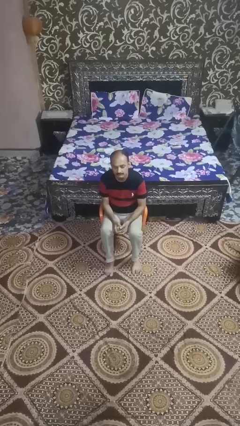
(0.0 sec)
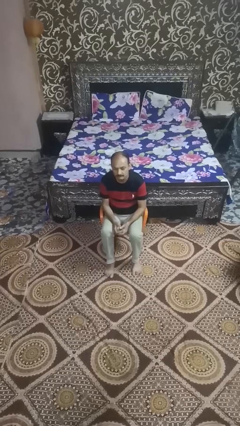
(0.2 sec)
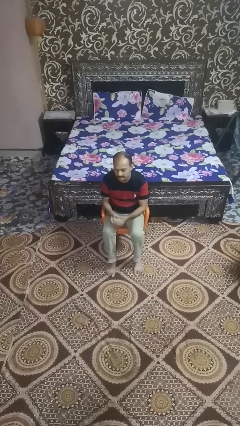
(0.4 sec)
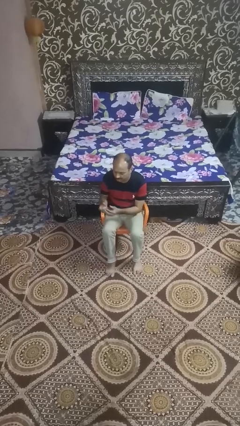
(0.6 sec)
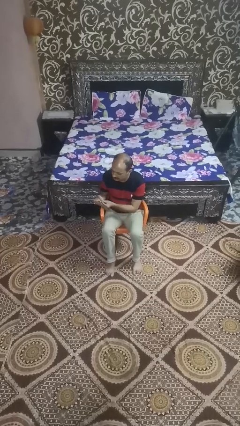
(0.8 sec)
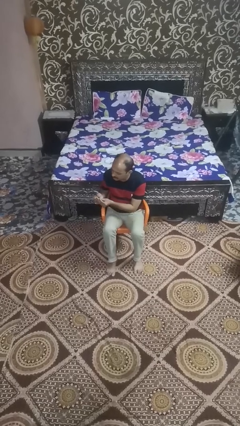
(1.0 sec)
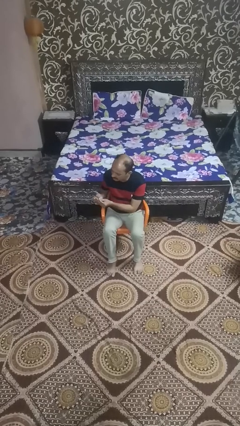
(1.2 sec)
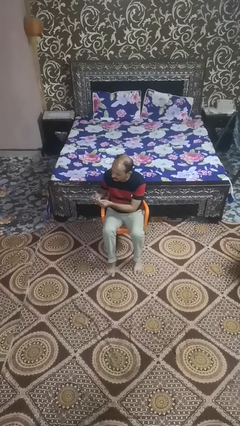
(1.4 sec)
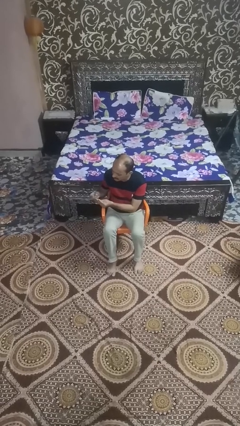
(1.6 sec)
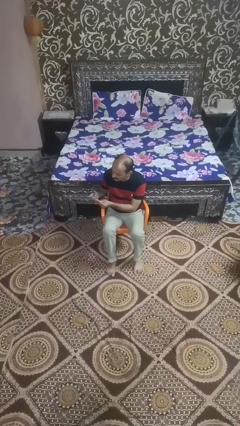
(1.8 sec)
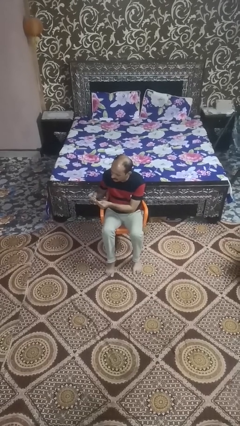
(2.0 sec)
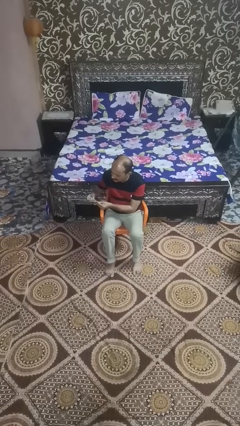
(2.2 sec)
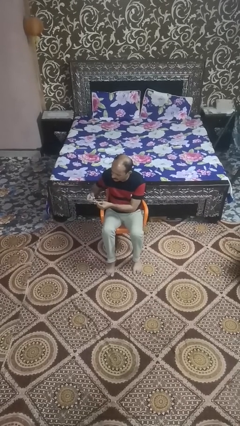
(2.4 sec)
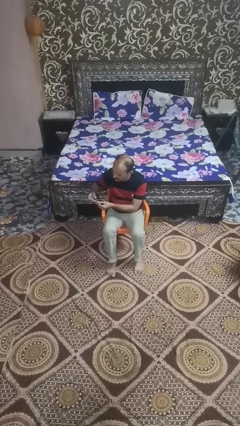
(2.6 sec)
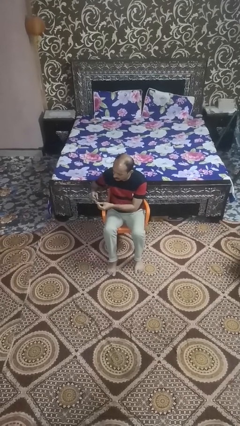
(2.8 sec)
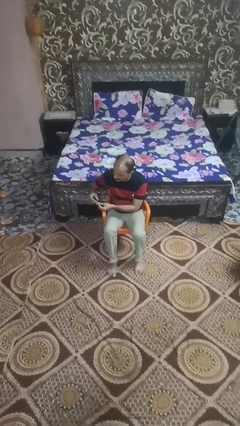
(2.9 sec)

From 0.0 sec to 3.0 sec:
person clips fingernails

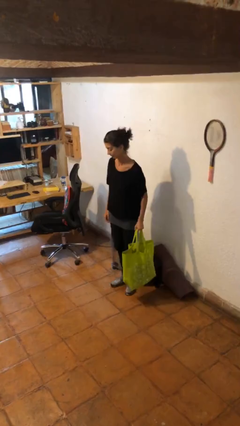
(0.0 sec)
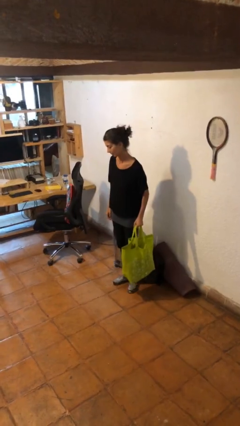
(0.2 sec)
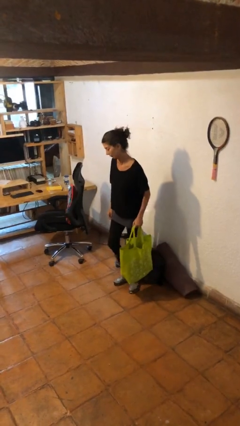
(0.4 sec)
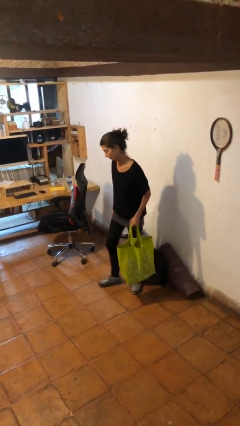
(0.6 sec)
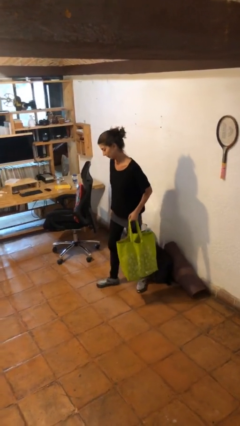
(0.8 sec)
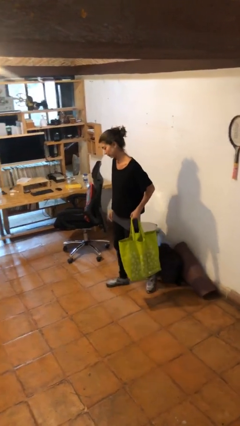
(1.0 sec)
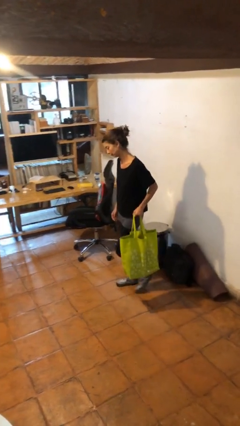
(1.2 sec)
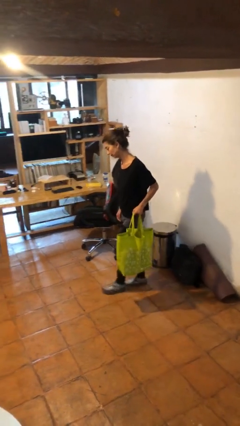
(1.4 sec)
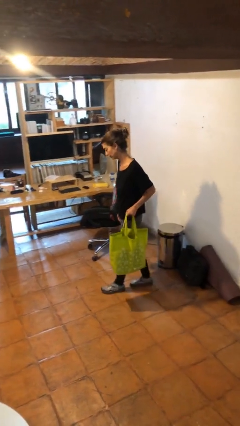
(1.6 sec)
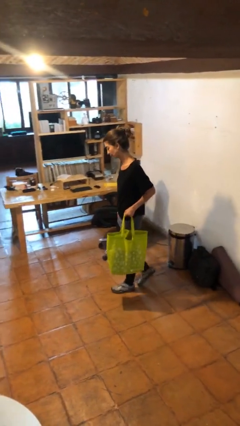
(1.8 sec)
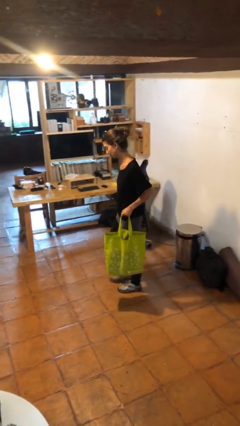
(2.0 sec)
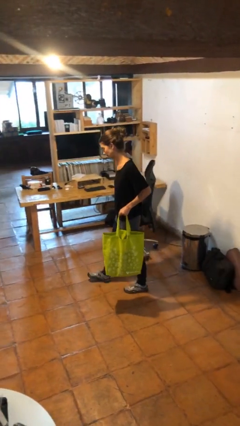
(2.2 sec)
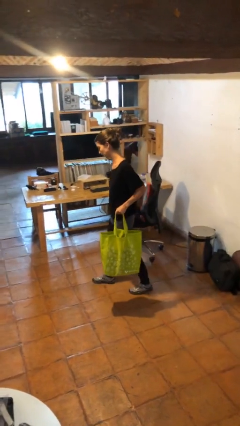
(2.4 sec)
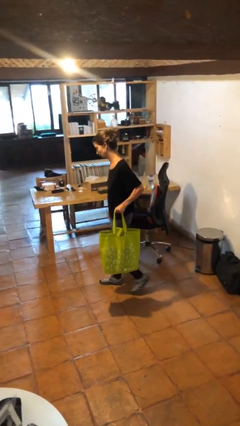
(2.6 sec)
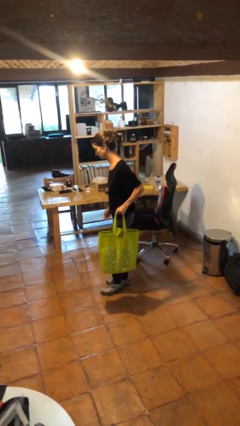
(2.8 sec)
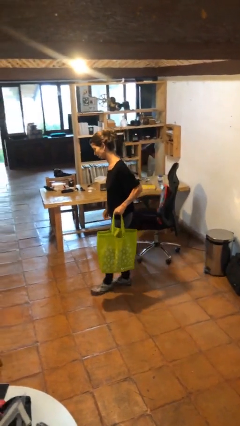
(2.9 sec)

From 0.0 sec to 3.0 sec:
person carries groceries

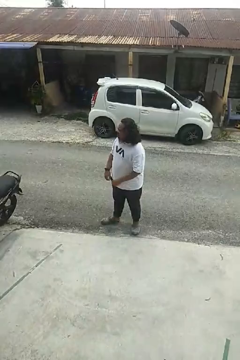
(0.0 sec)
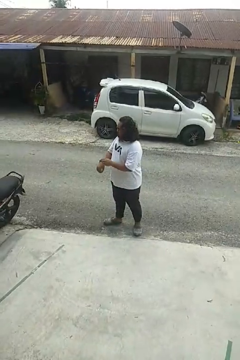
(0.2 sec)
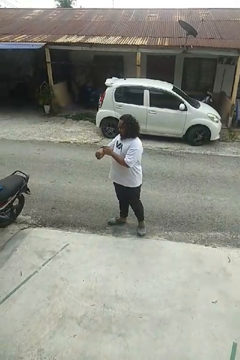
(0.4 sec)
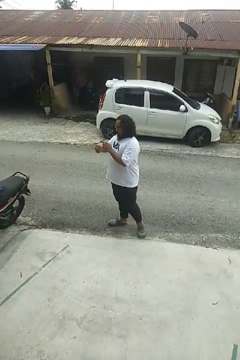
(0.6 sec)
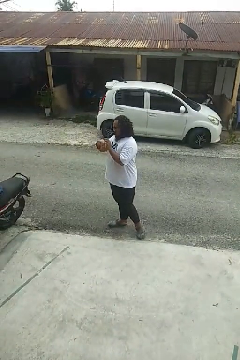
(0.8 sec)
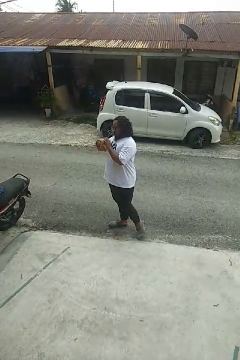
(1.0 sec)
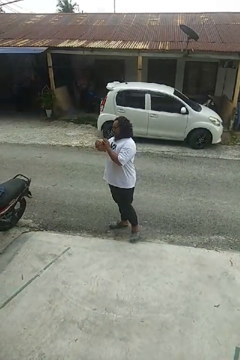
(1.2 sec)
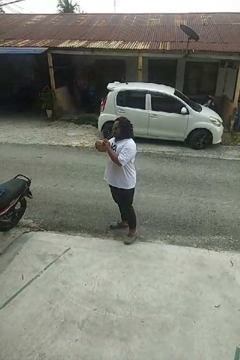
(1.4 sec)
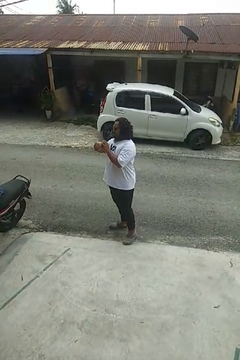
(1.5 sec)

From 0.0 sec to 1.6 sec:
person looks at wristwatch

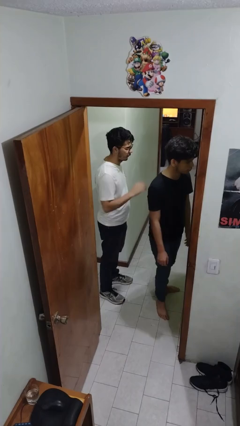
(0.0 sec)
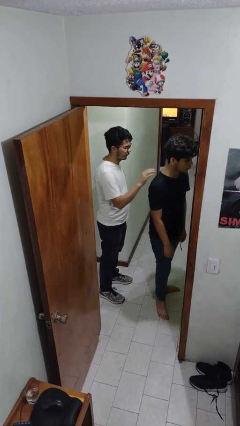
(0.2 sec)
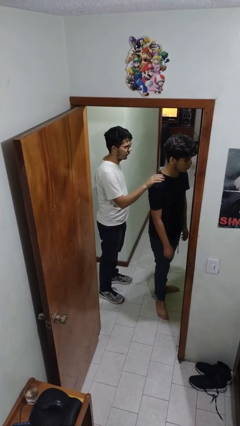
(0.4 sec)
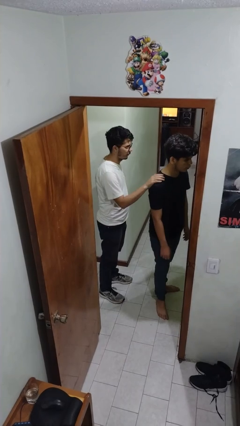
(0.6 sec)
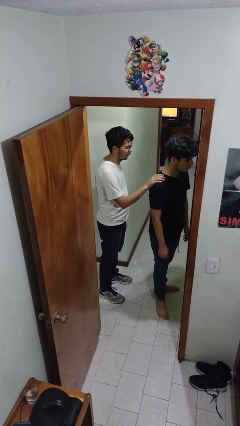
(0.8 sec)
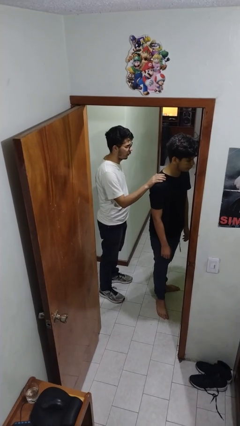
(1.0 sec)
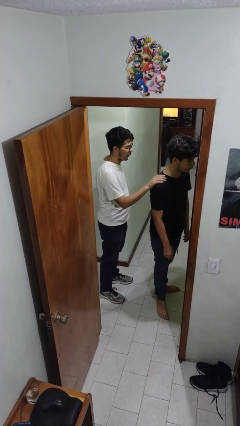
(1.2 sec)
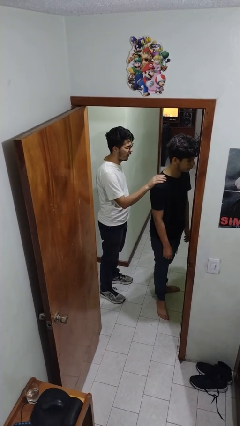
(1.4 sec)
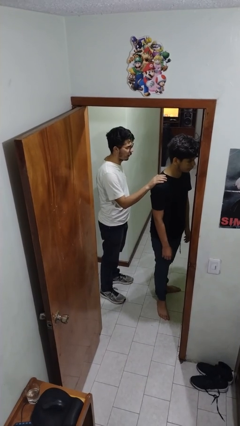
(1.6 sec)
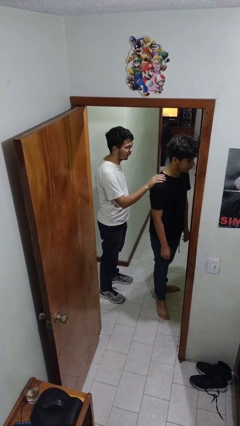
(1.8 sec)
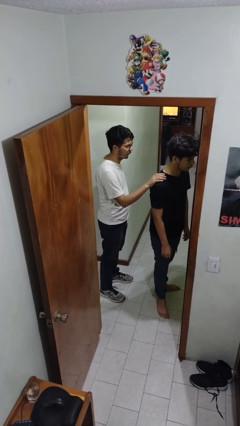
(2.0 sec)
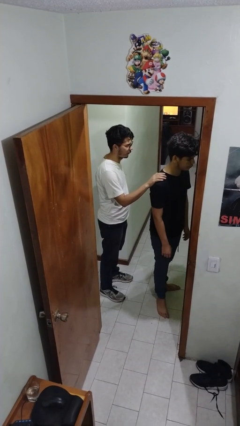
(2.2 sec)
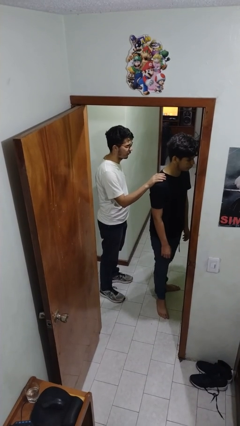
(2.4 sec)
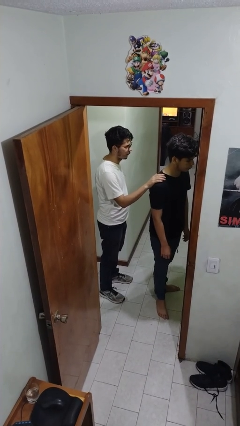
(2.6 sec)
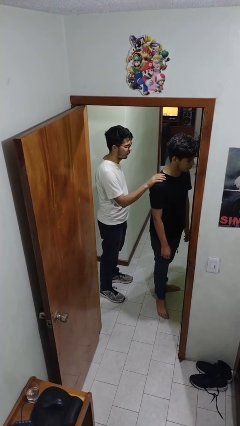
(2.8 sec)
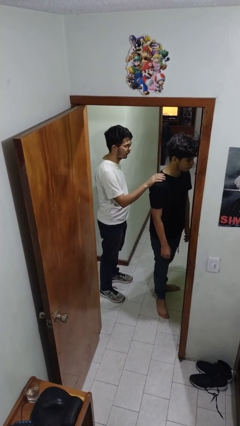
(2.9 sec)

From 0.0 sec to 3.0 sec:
person grabs person by shoulder

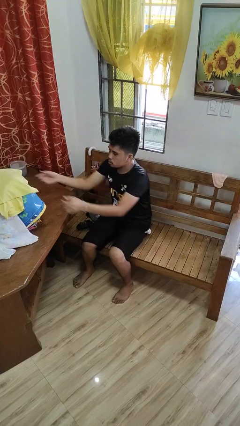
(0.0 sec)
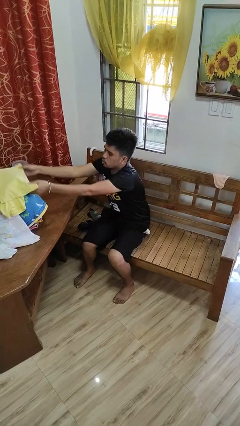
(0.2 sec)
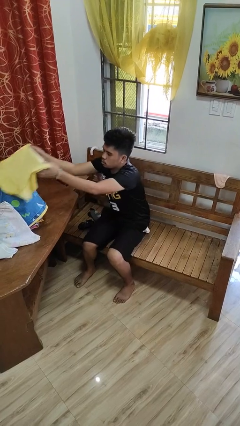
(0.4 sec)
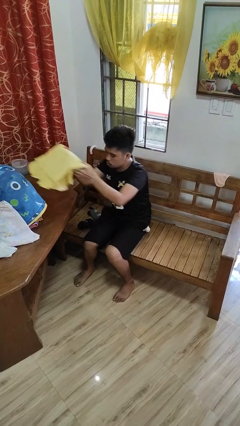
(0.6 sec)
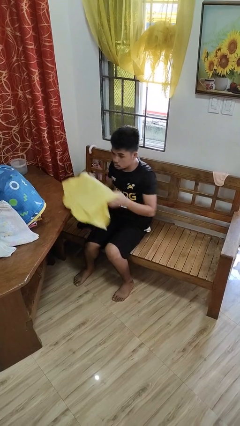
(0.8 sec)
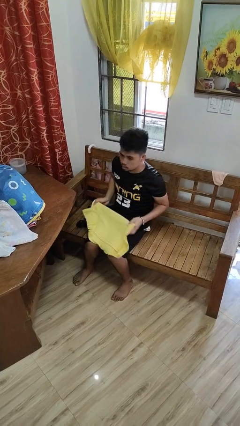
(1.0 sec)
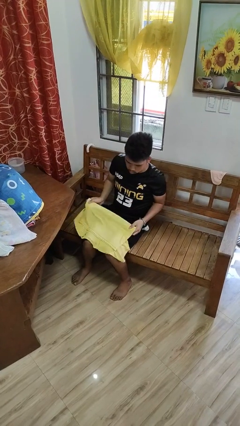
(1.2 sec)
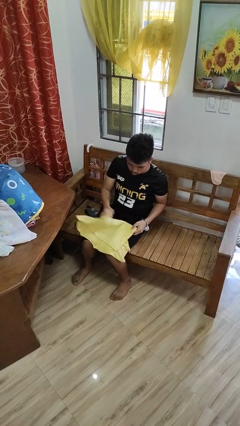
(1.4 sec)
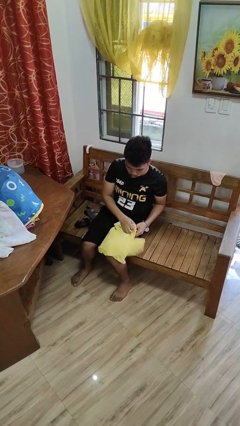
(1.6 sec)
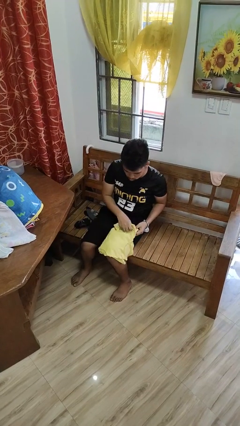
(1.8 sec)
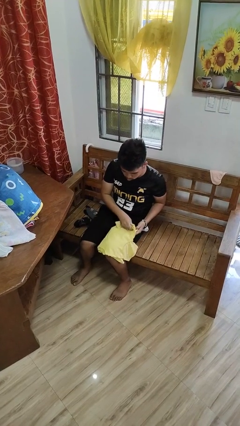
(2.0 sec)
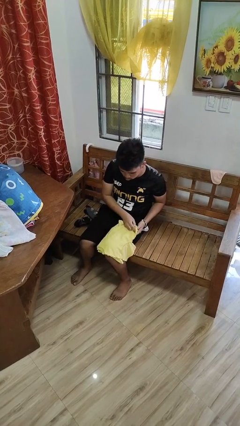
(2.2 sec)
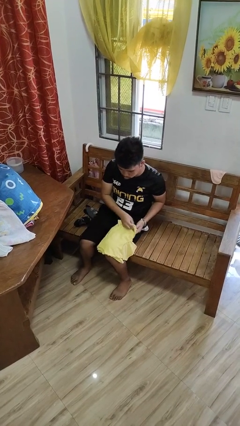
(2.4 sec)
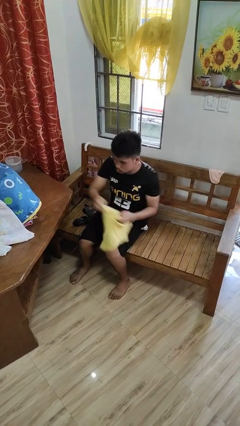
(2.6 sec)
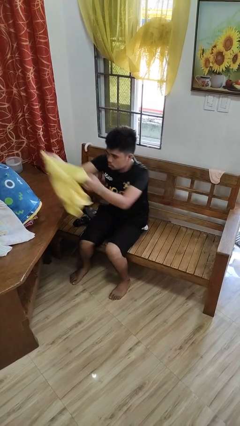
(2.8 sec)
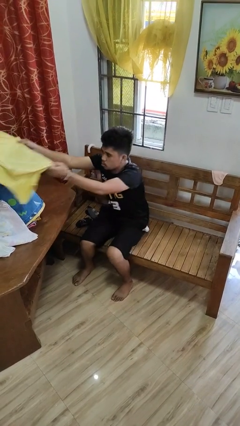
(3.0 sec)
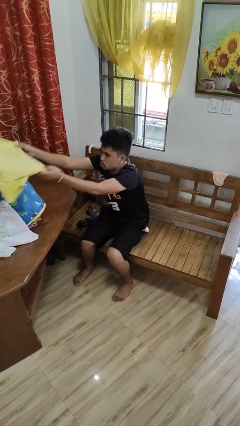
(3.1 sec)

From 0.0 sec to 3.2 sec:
person folds shirt

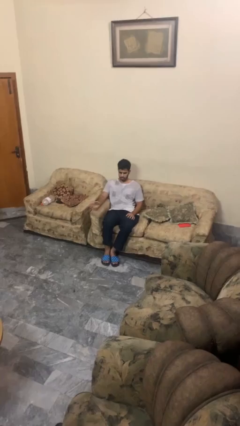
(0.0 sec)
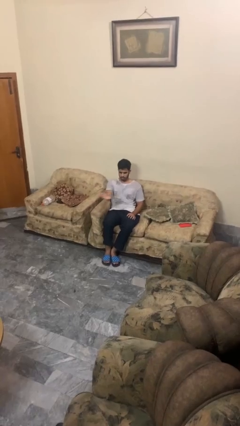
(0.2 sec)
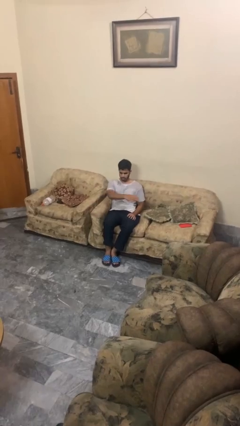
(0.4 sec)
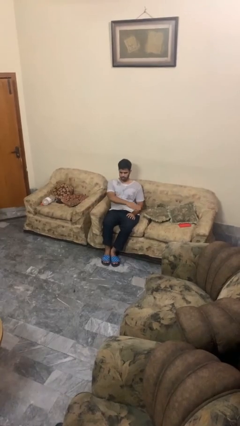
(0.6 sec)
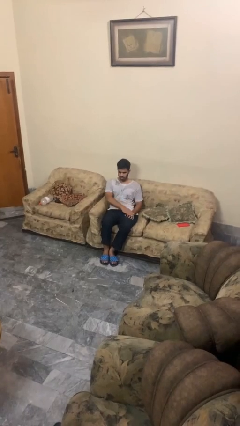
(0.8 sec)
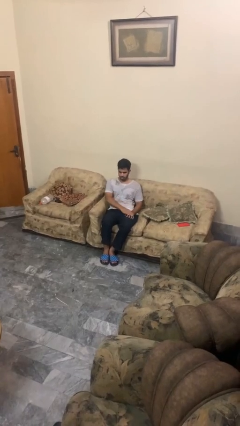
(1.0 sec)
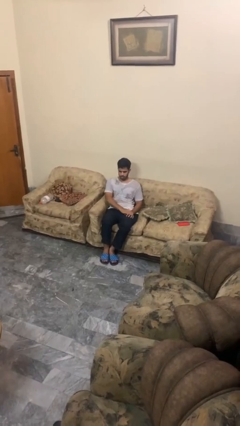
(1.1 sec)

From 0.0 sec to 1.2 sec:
person gestures swipe left

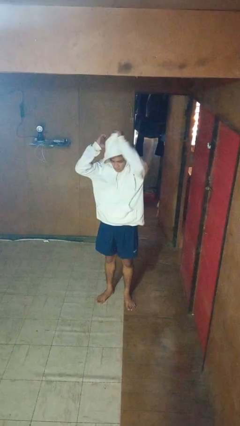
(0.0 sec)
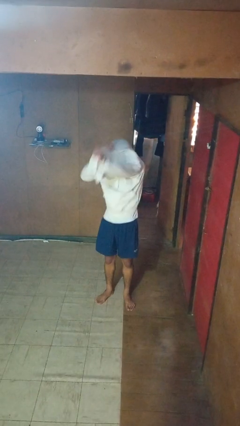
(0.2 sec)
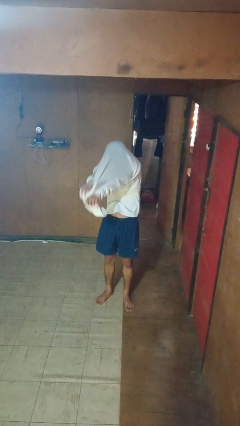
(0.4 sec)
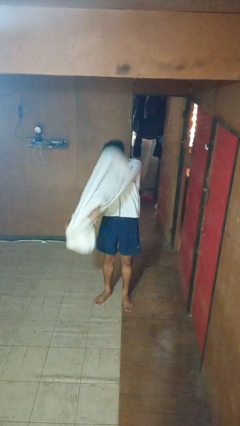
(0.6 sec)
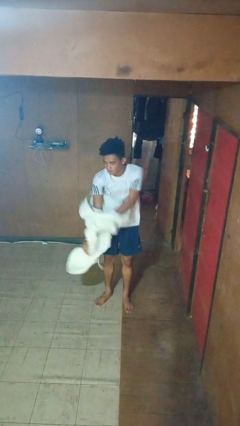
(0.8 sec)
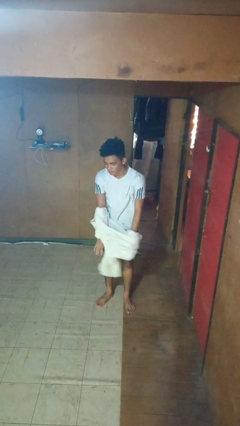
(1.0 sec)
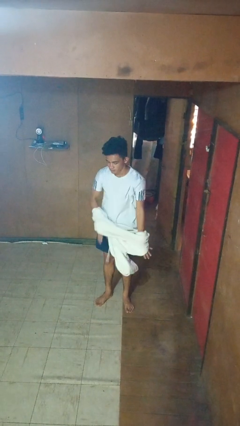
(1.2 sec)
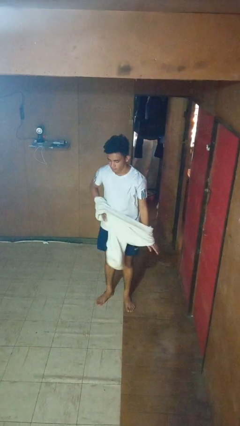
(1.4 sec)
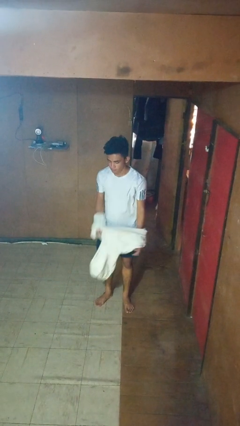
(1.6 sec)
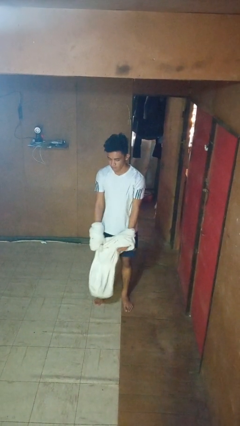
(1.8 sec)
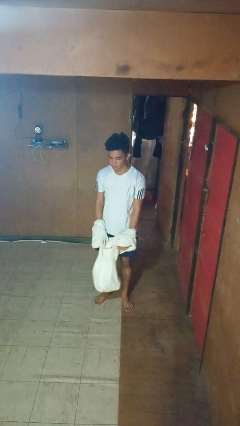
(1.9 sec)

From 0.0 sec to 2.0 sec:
person takes off hoodie
